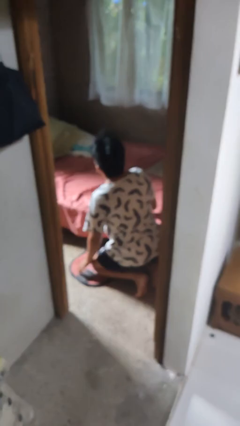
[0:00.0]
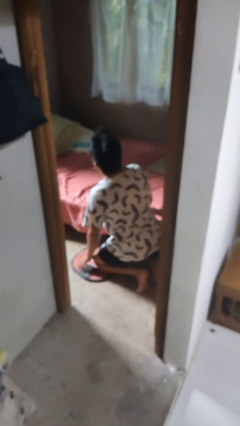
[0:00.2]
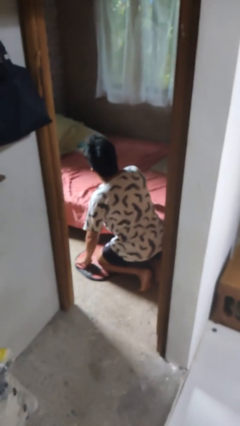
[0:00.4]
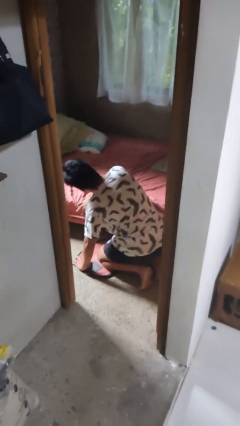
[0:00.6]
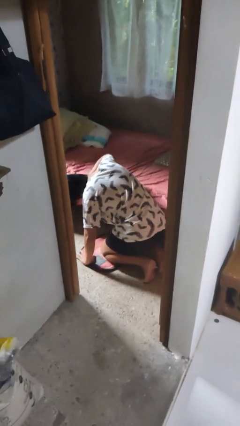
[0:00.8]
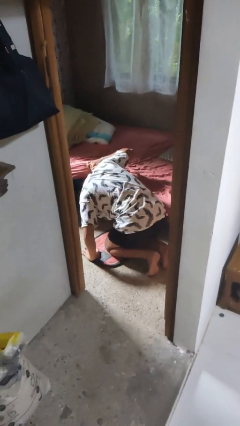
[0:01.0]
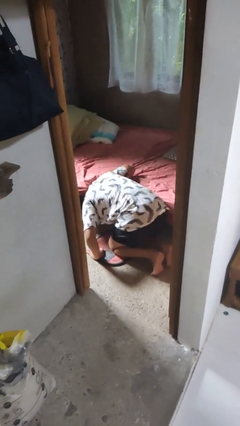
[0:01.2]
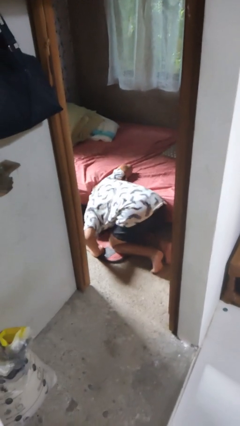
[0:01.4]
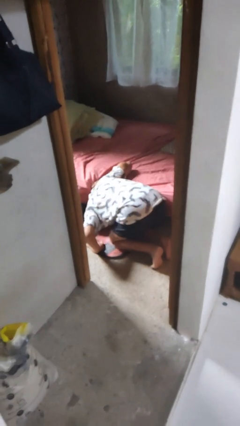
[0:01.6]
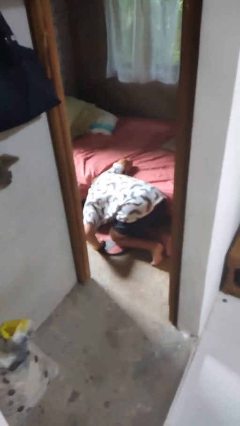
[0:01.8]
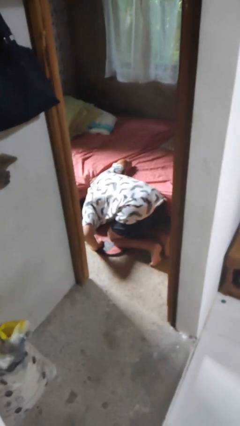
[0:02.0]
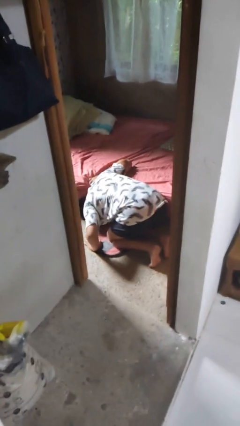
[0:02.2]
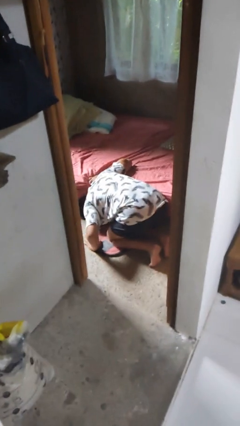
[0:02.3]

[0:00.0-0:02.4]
person searches under bed

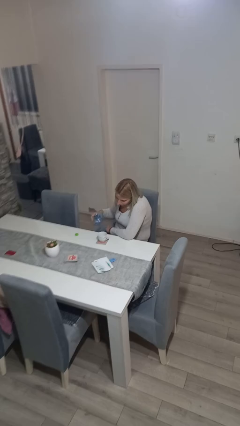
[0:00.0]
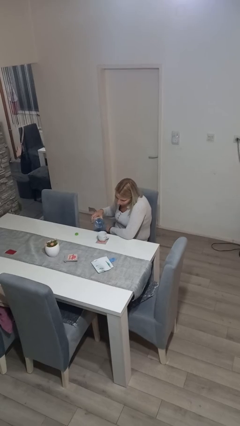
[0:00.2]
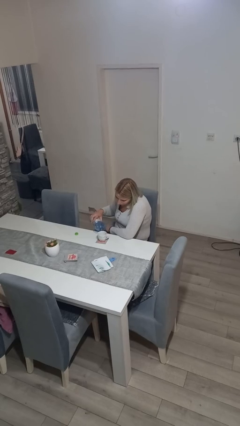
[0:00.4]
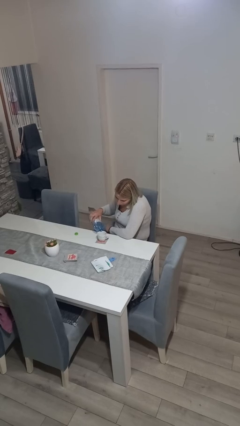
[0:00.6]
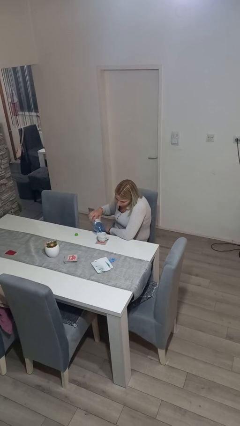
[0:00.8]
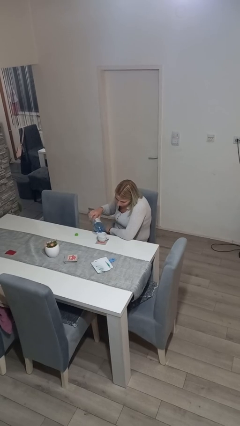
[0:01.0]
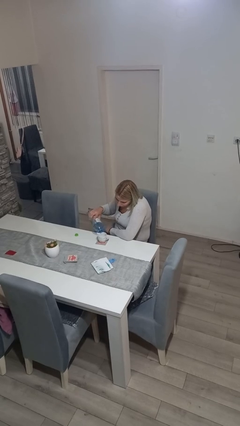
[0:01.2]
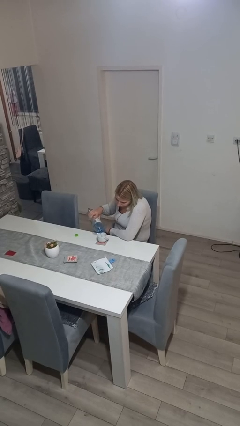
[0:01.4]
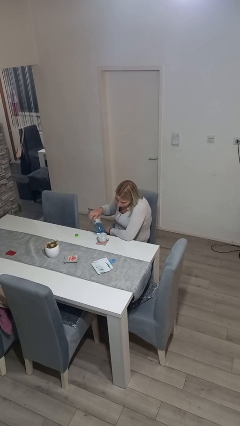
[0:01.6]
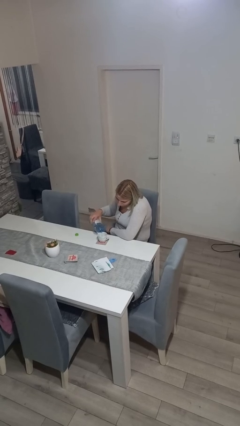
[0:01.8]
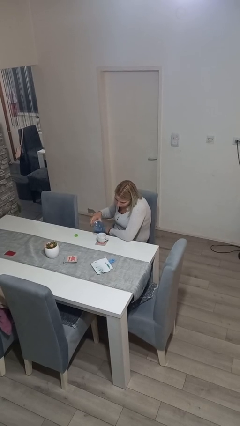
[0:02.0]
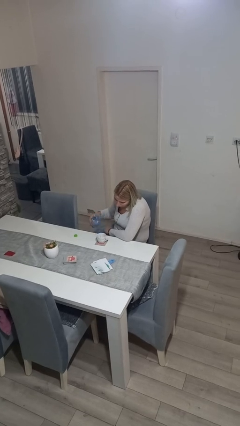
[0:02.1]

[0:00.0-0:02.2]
person pours liquid into cup

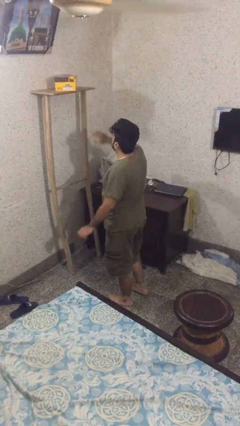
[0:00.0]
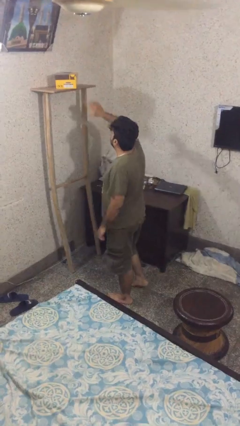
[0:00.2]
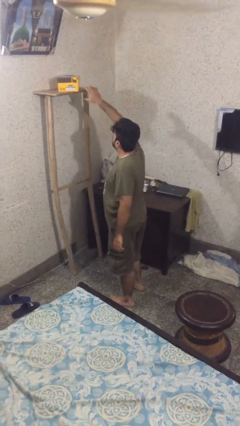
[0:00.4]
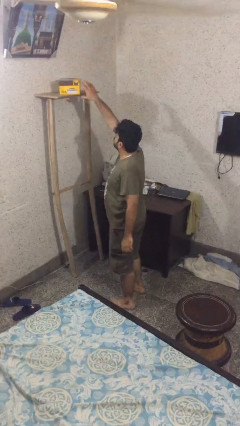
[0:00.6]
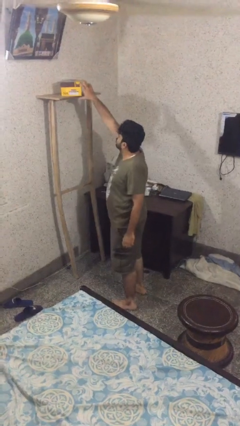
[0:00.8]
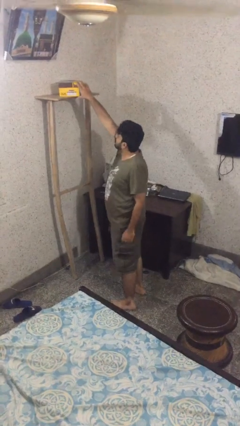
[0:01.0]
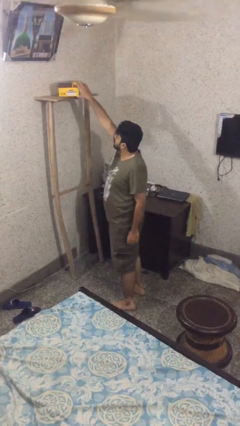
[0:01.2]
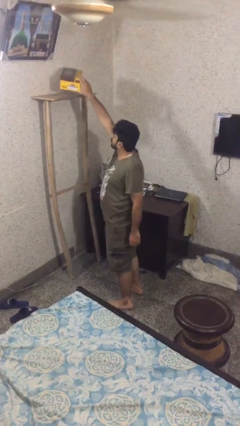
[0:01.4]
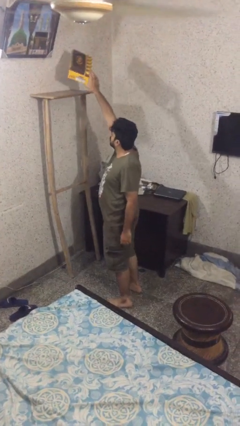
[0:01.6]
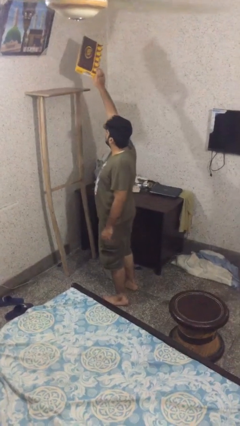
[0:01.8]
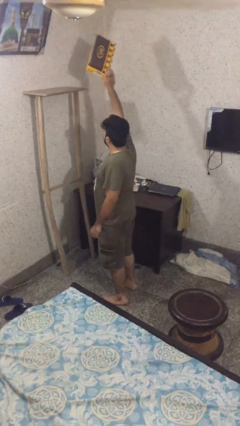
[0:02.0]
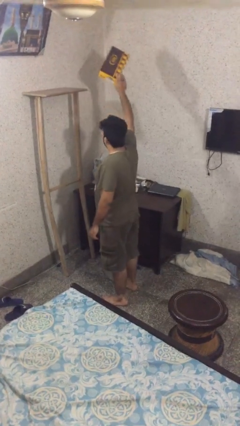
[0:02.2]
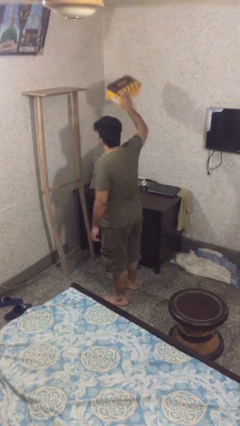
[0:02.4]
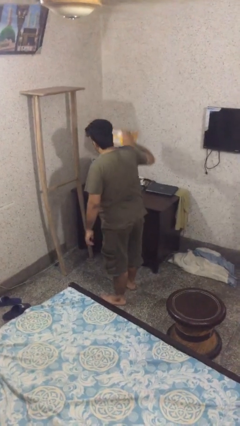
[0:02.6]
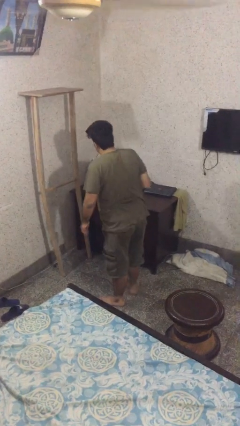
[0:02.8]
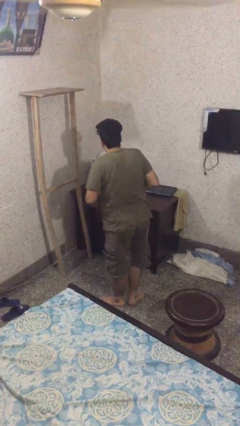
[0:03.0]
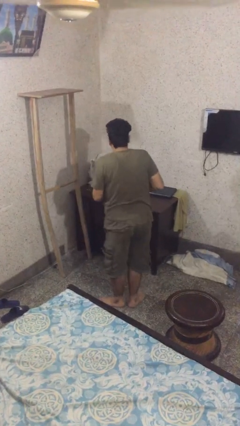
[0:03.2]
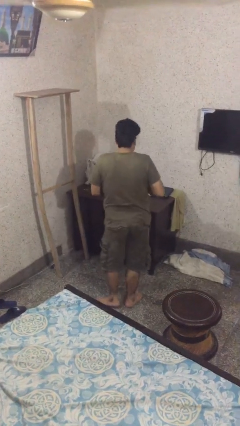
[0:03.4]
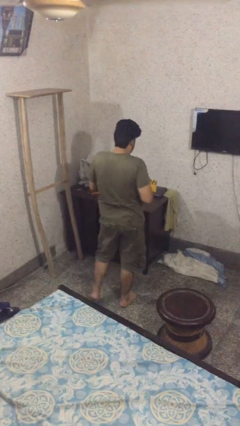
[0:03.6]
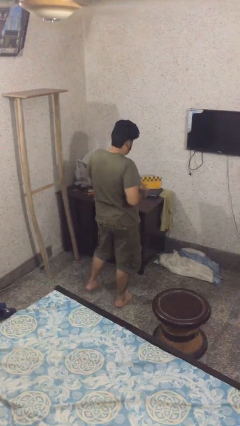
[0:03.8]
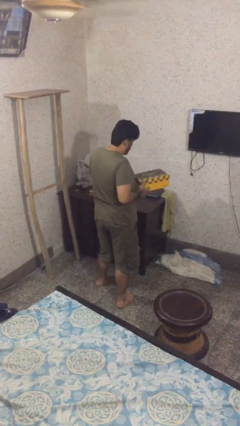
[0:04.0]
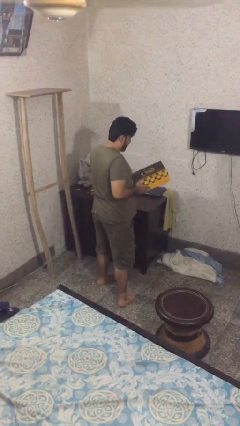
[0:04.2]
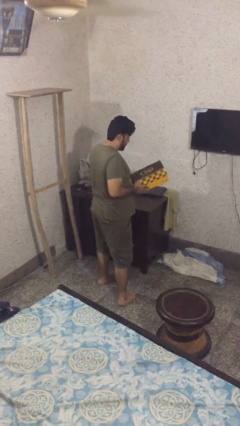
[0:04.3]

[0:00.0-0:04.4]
person picks up object from shelf

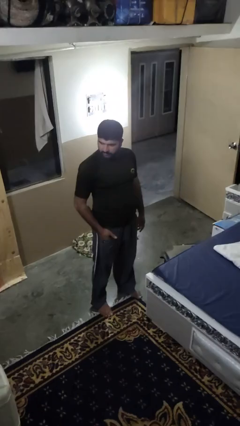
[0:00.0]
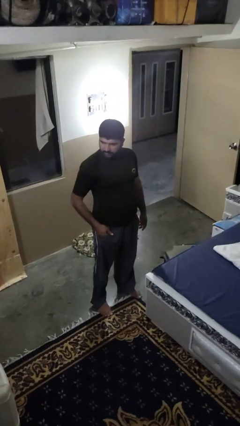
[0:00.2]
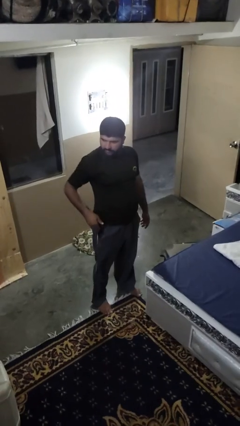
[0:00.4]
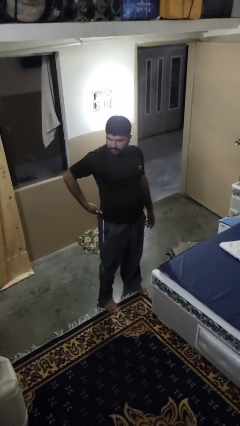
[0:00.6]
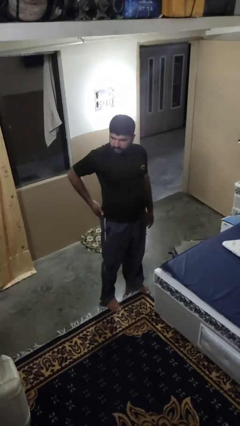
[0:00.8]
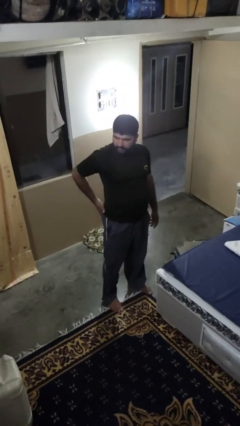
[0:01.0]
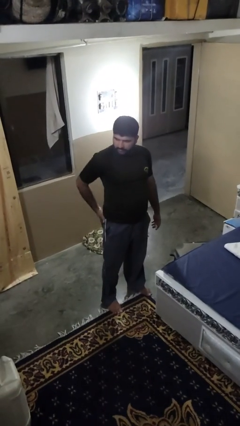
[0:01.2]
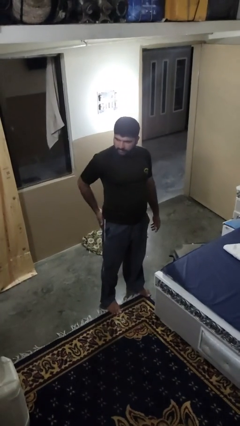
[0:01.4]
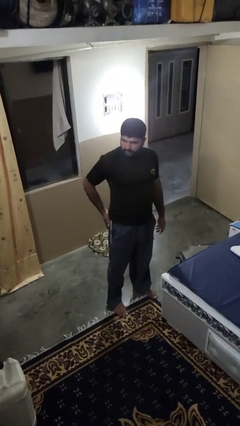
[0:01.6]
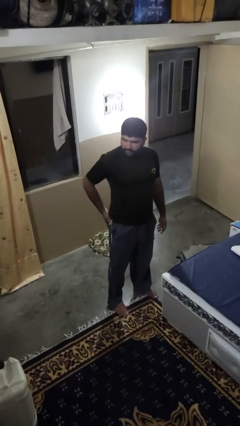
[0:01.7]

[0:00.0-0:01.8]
person puts hands in back pockets

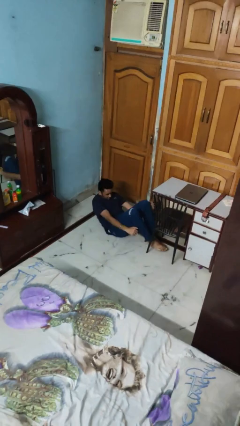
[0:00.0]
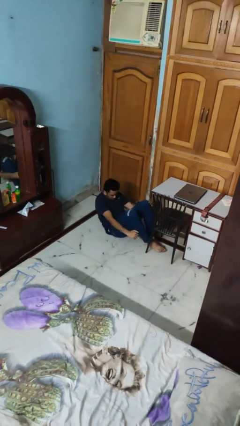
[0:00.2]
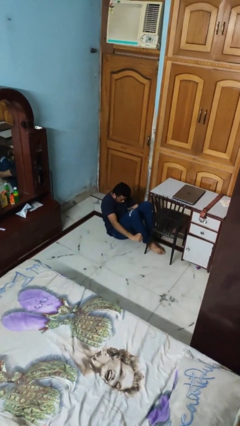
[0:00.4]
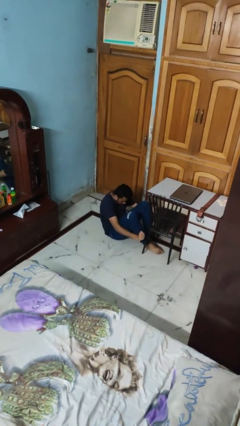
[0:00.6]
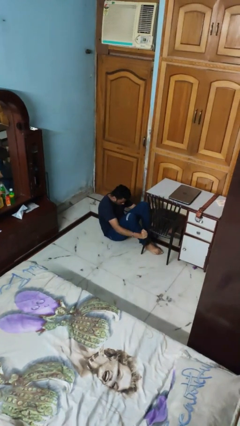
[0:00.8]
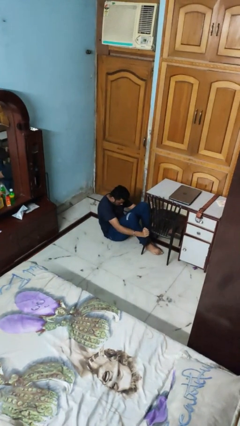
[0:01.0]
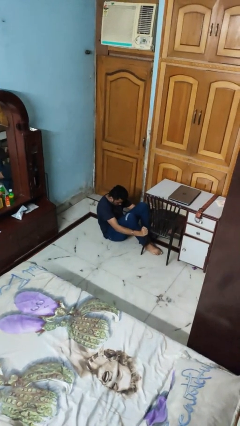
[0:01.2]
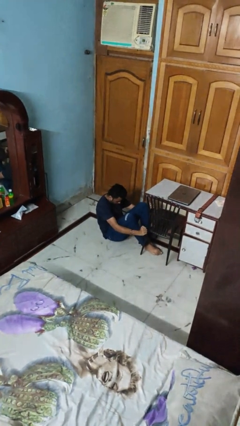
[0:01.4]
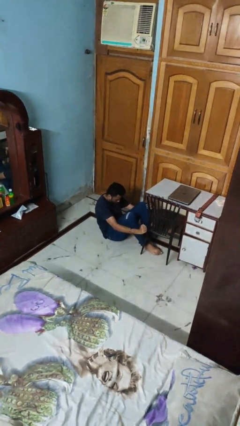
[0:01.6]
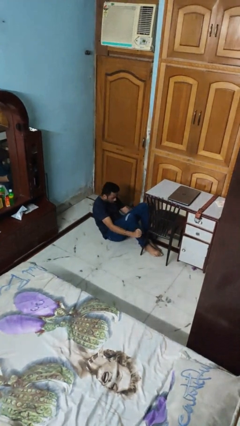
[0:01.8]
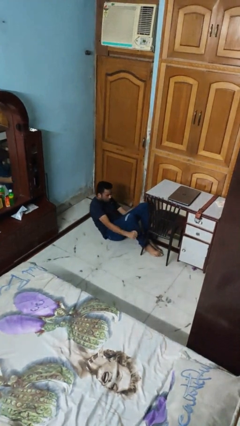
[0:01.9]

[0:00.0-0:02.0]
person exercises with situp

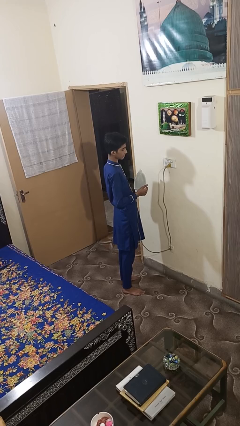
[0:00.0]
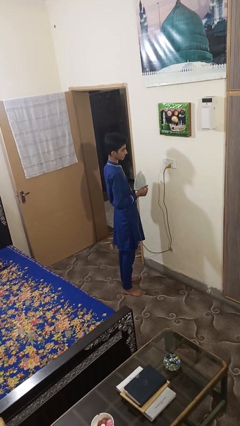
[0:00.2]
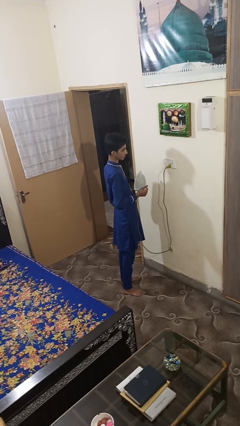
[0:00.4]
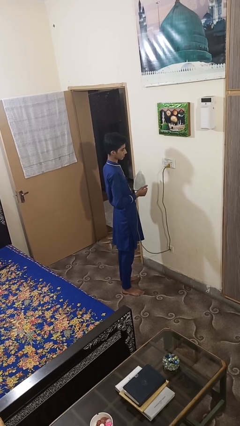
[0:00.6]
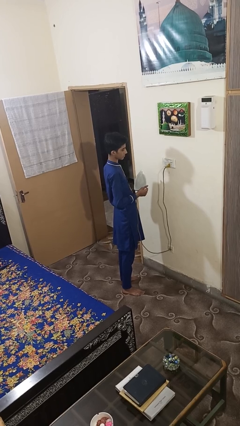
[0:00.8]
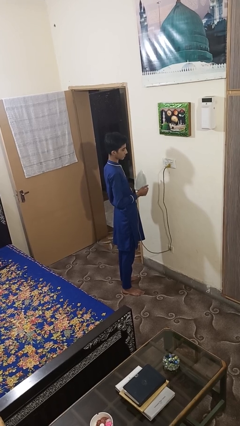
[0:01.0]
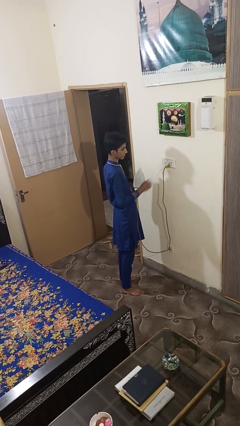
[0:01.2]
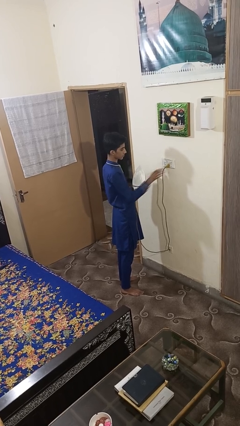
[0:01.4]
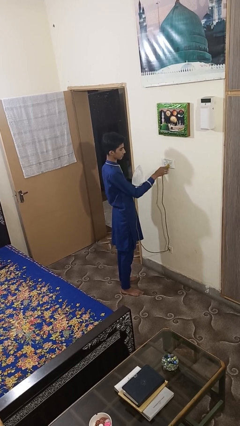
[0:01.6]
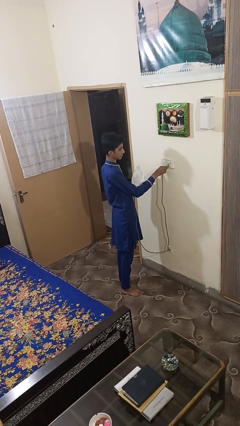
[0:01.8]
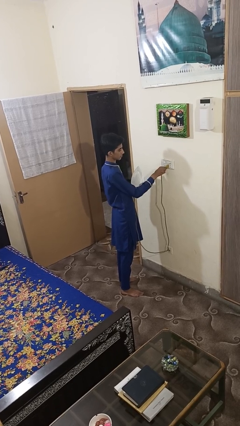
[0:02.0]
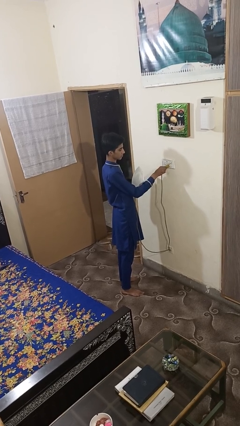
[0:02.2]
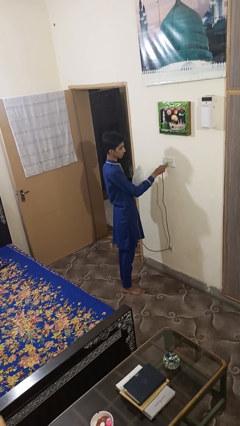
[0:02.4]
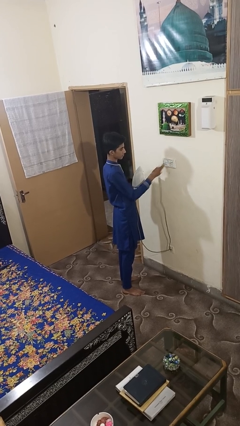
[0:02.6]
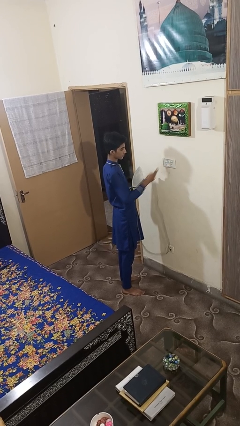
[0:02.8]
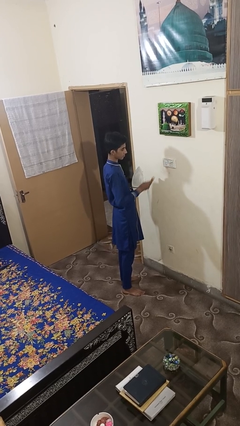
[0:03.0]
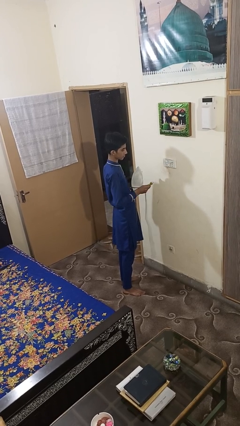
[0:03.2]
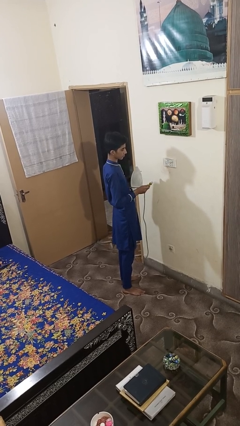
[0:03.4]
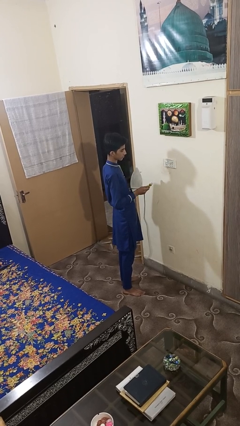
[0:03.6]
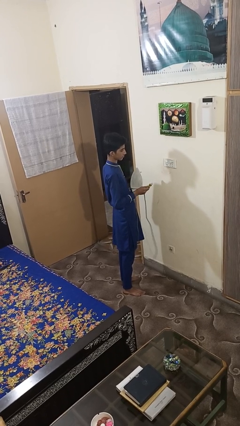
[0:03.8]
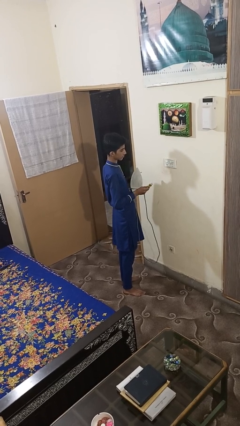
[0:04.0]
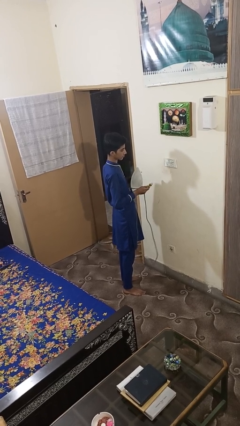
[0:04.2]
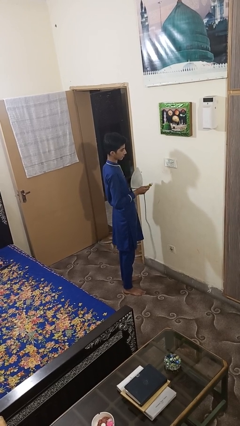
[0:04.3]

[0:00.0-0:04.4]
person unplugs from electrical socket

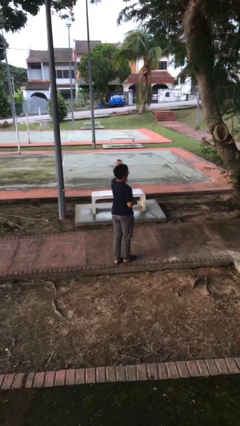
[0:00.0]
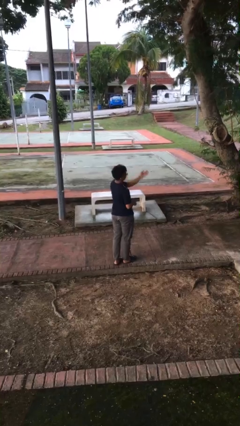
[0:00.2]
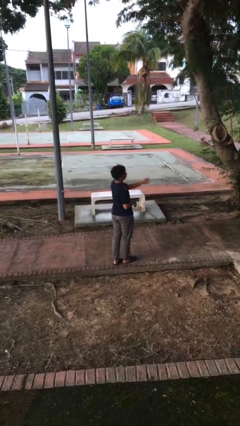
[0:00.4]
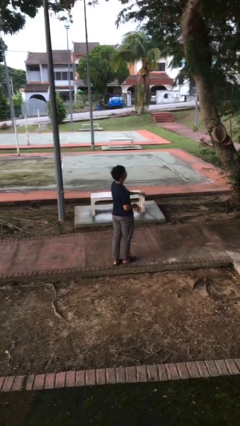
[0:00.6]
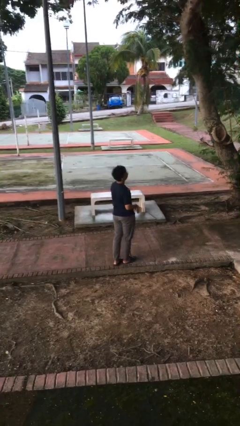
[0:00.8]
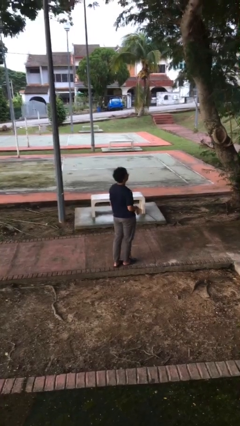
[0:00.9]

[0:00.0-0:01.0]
person karate chop
